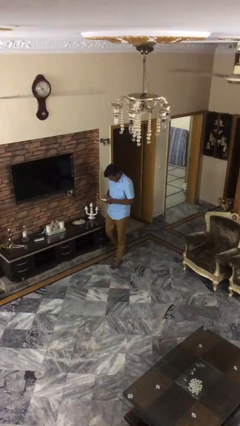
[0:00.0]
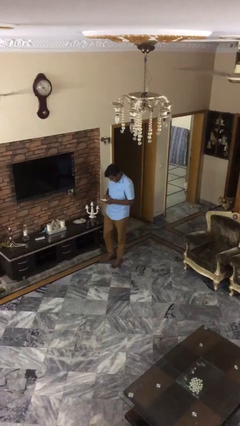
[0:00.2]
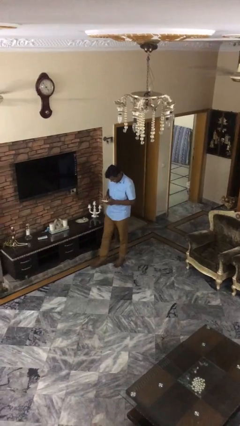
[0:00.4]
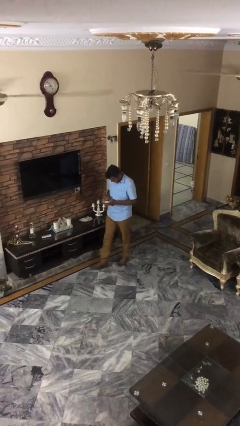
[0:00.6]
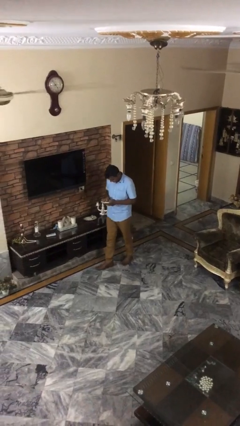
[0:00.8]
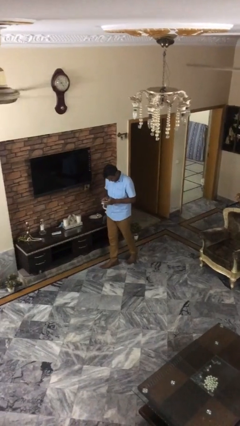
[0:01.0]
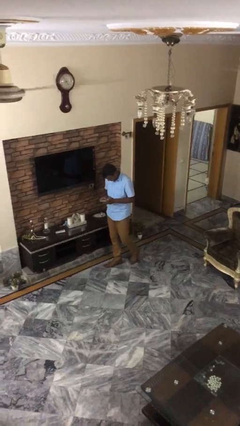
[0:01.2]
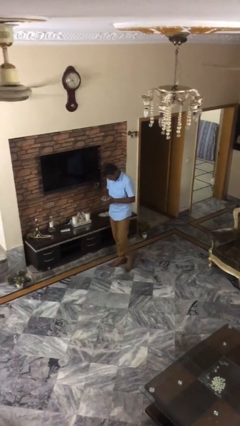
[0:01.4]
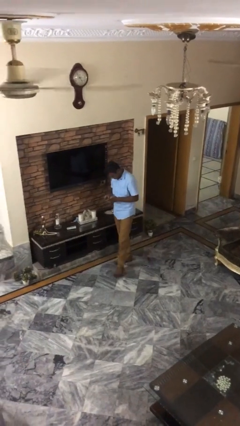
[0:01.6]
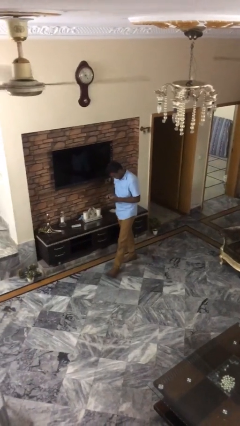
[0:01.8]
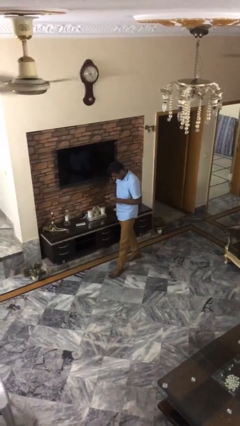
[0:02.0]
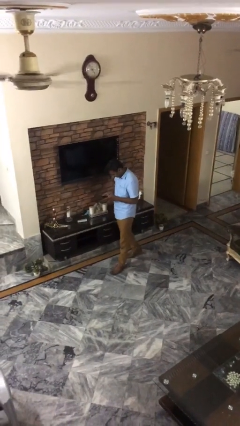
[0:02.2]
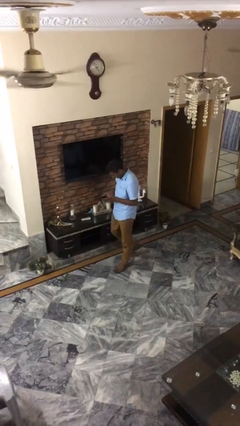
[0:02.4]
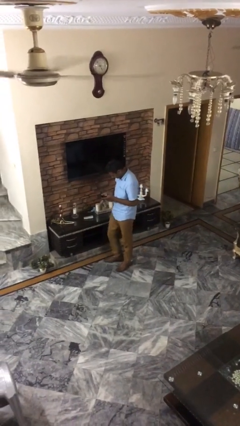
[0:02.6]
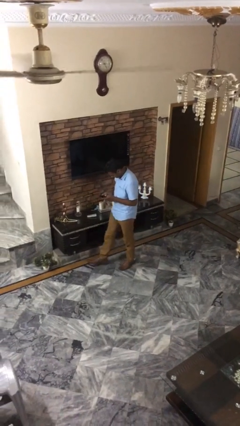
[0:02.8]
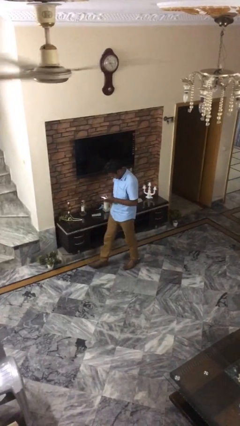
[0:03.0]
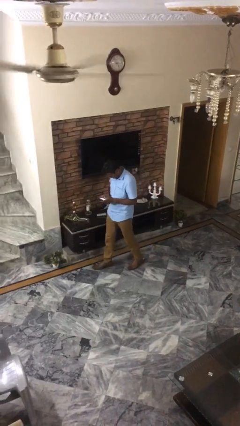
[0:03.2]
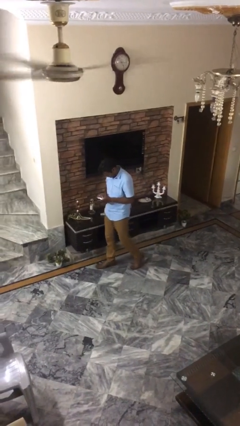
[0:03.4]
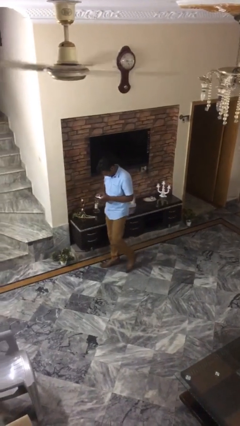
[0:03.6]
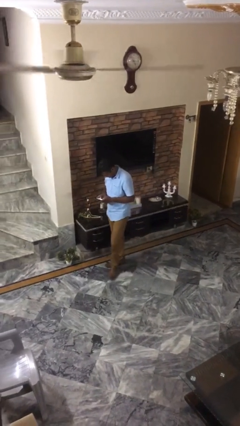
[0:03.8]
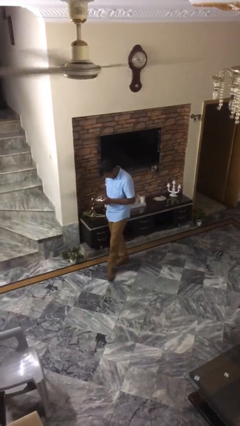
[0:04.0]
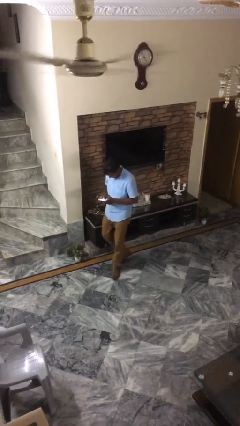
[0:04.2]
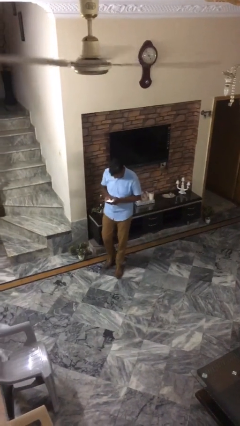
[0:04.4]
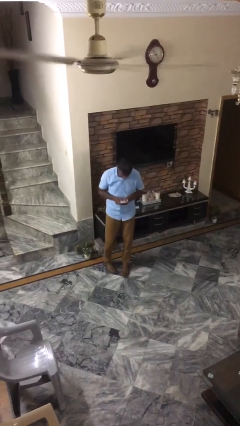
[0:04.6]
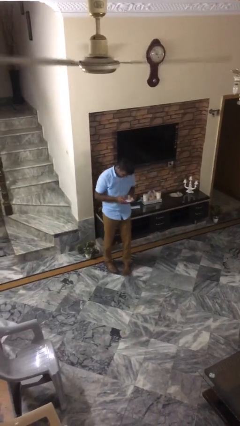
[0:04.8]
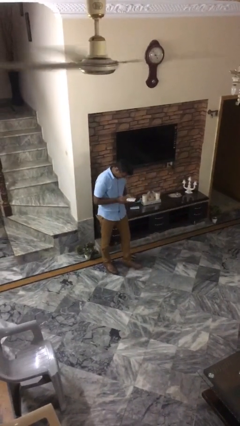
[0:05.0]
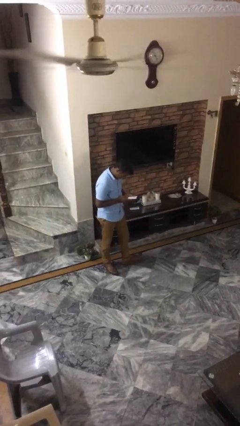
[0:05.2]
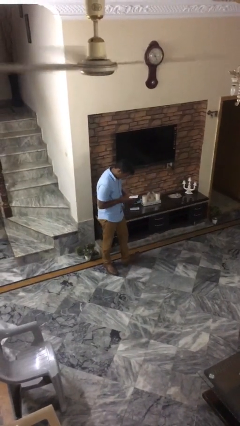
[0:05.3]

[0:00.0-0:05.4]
person texts on phone

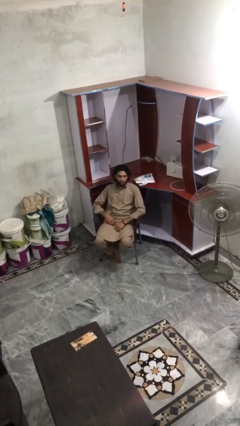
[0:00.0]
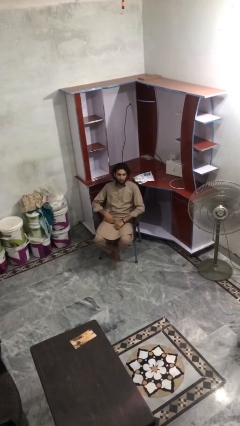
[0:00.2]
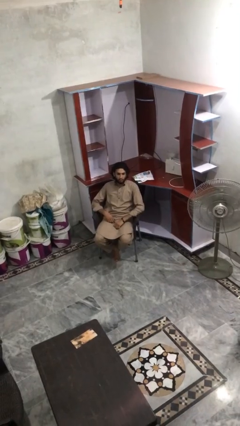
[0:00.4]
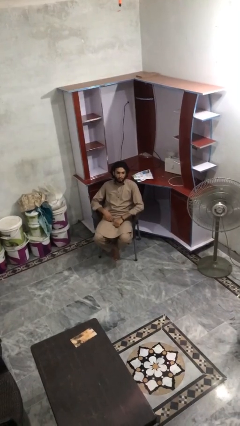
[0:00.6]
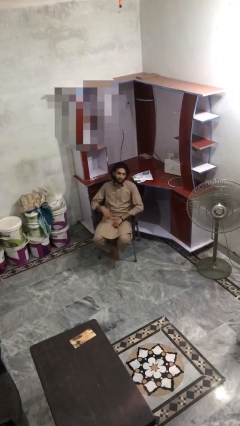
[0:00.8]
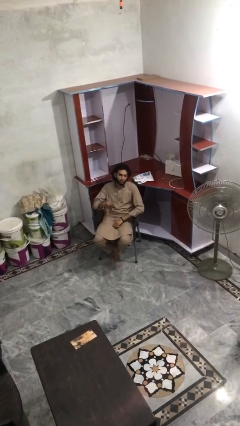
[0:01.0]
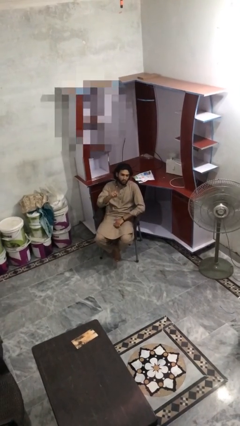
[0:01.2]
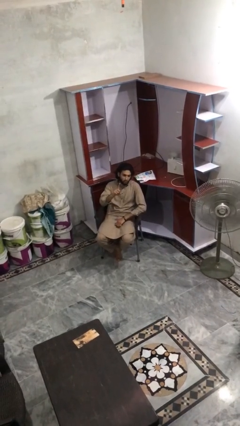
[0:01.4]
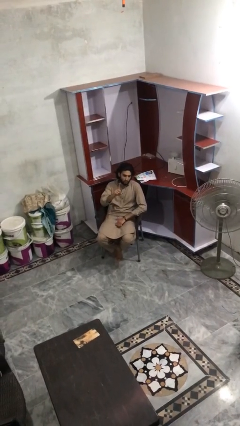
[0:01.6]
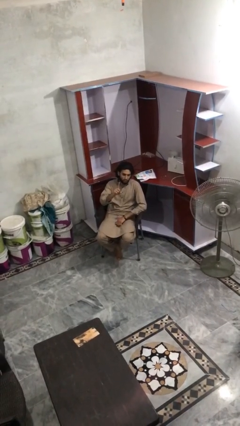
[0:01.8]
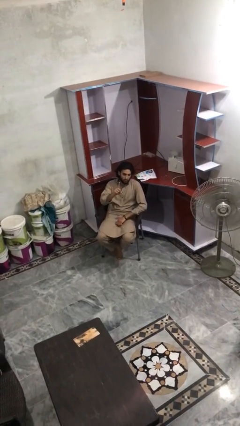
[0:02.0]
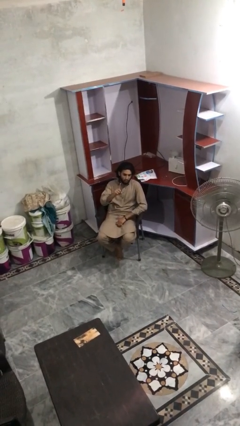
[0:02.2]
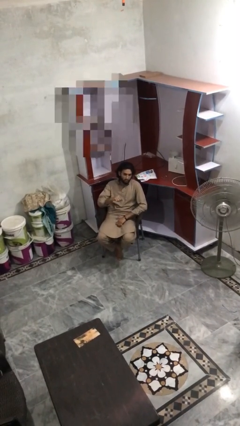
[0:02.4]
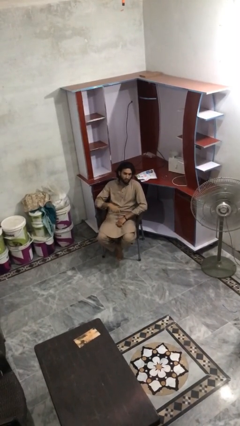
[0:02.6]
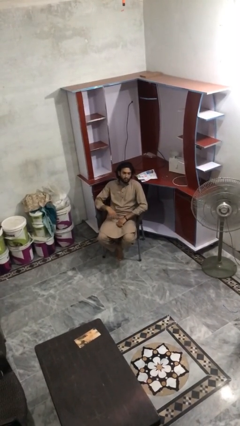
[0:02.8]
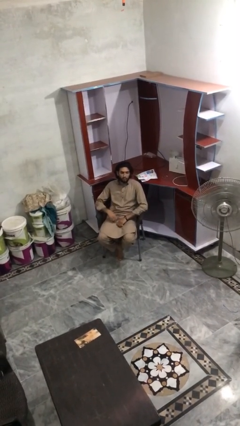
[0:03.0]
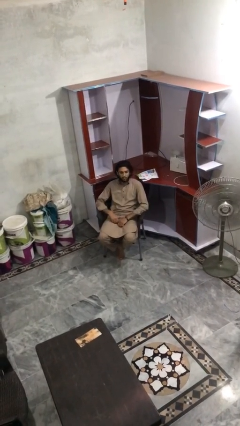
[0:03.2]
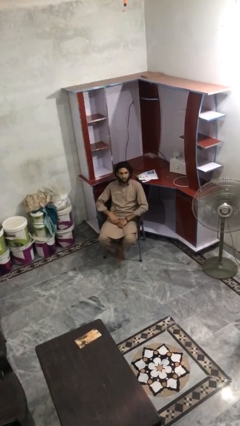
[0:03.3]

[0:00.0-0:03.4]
person gestures number one

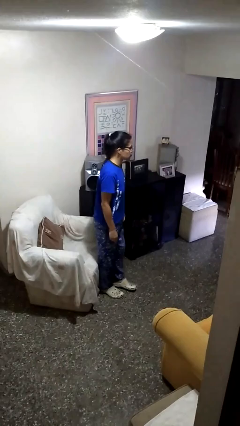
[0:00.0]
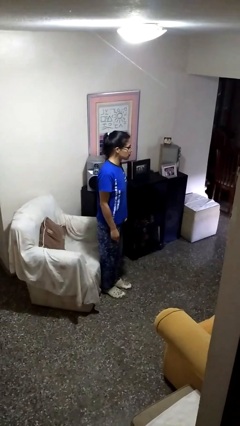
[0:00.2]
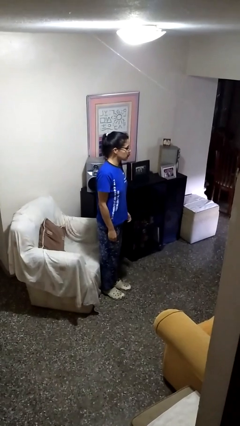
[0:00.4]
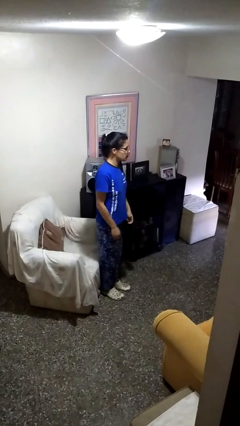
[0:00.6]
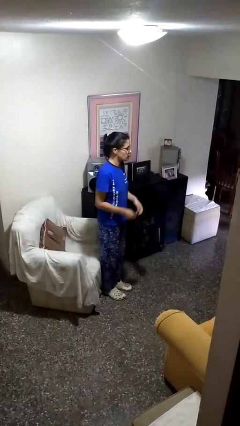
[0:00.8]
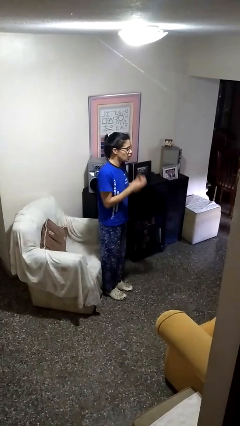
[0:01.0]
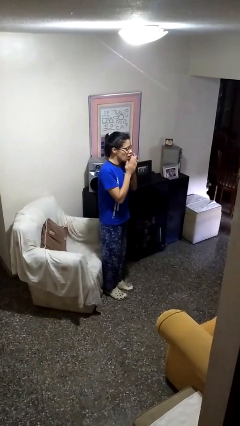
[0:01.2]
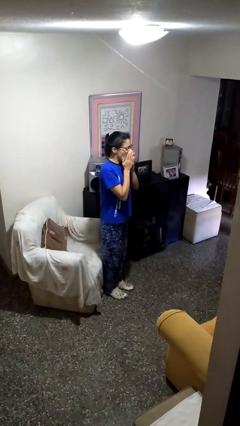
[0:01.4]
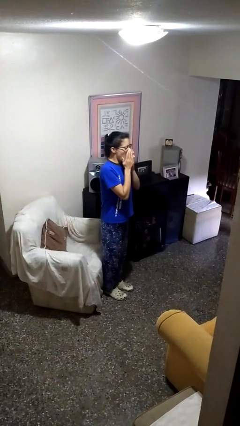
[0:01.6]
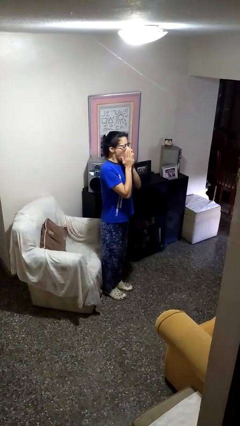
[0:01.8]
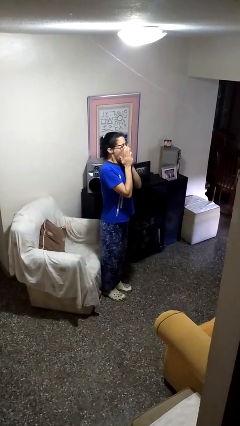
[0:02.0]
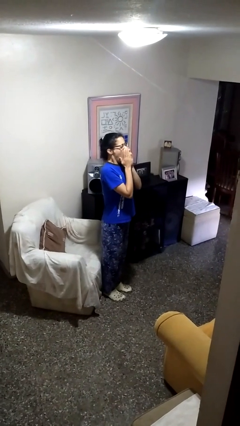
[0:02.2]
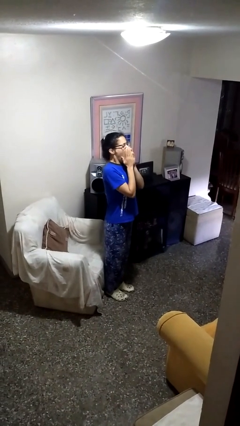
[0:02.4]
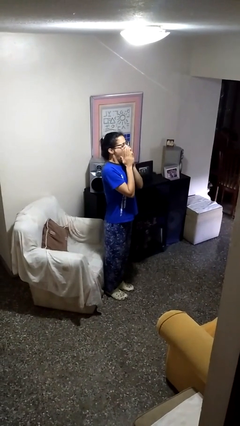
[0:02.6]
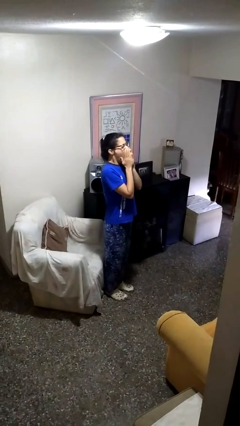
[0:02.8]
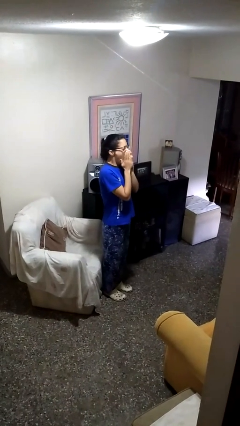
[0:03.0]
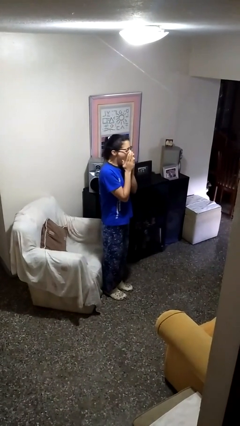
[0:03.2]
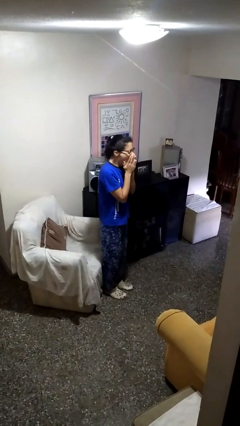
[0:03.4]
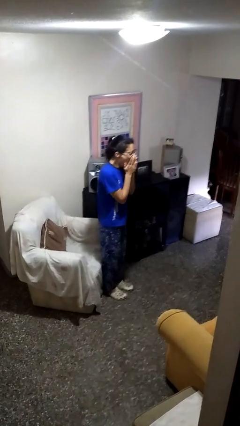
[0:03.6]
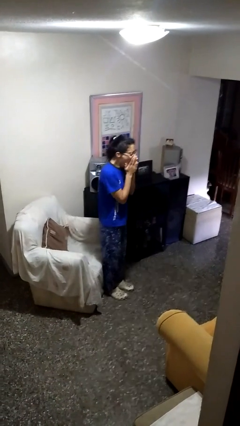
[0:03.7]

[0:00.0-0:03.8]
person yawns

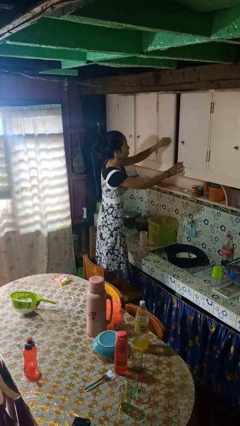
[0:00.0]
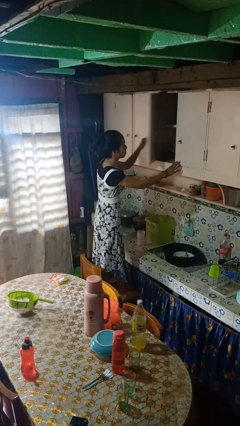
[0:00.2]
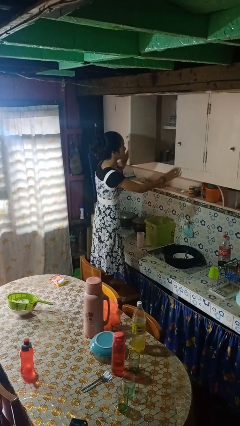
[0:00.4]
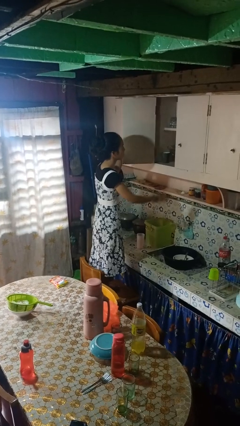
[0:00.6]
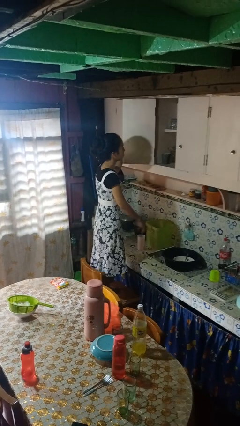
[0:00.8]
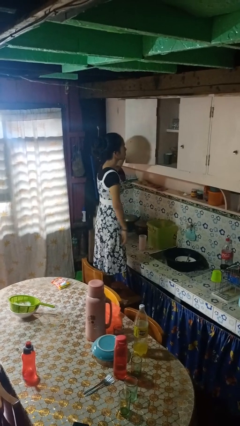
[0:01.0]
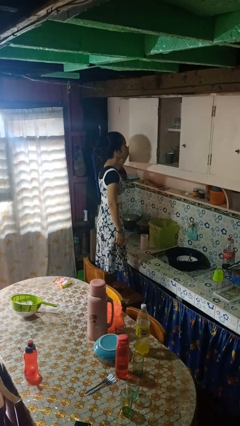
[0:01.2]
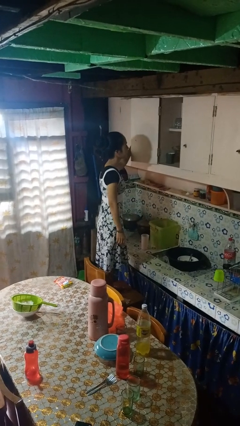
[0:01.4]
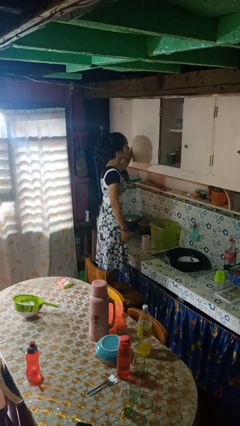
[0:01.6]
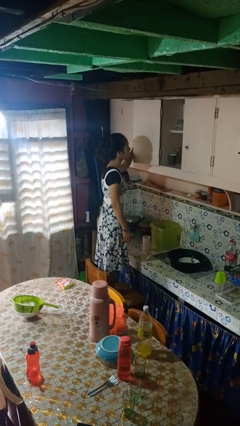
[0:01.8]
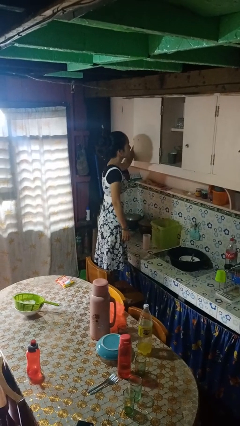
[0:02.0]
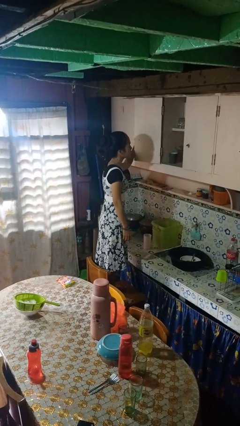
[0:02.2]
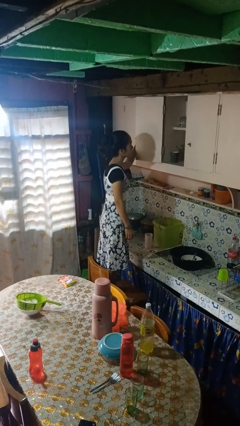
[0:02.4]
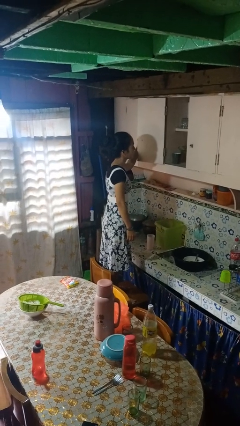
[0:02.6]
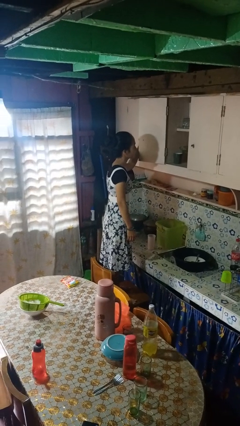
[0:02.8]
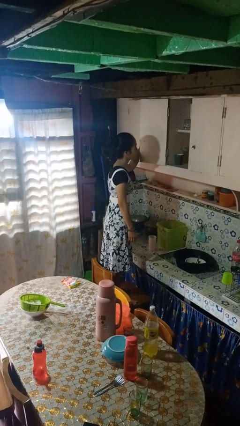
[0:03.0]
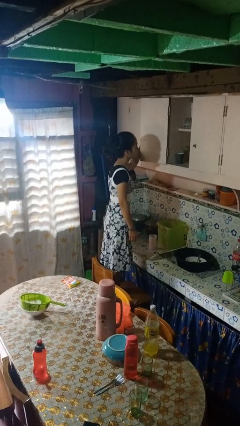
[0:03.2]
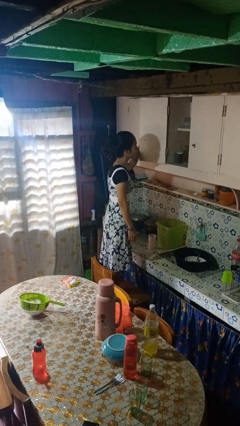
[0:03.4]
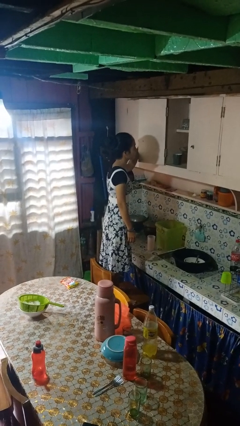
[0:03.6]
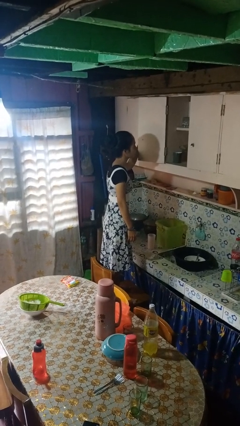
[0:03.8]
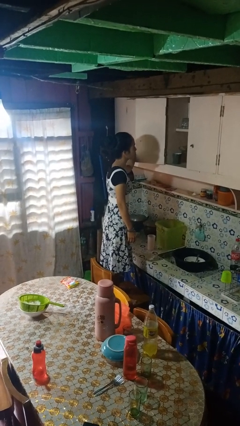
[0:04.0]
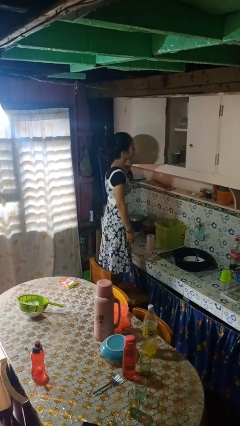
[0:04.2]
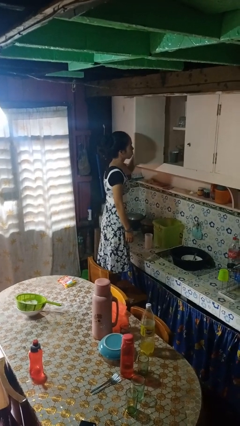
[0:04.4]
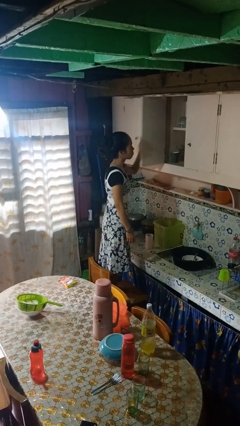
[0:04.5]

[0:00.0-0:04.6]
person opens cabinet

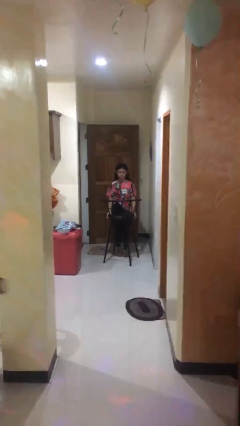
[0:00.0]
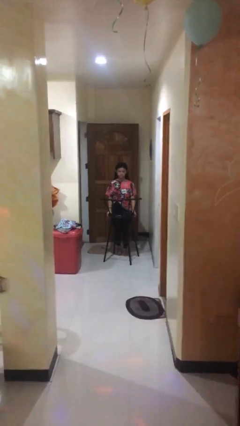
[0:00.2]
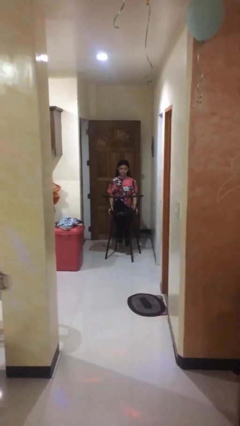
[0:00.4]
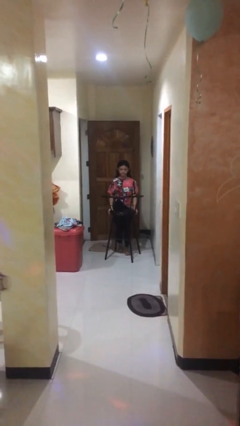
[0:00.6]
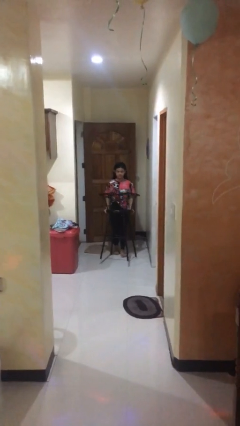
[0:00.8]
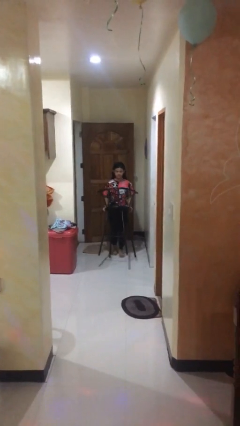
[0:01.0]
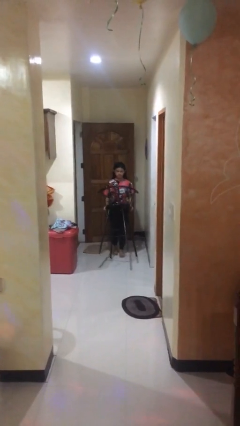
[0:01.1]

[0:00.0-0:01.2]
person picks up object from floor
